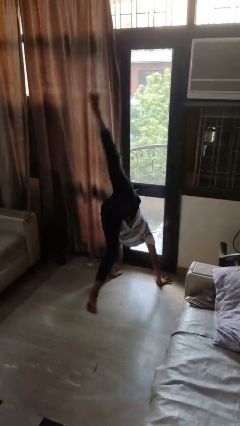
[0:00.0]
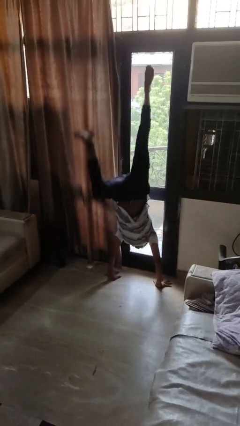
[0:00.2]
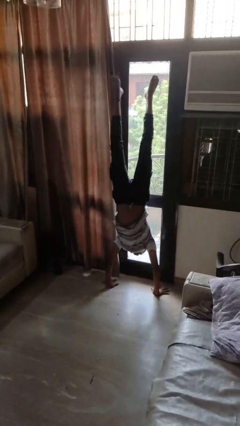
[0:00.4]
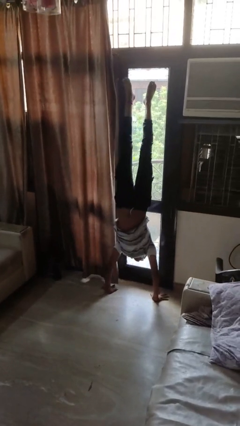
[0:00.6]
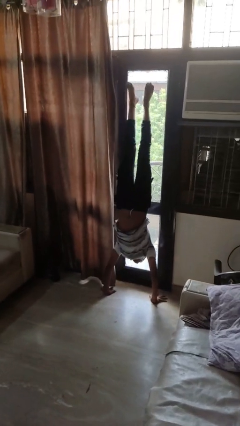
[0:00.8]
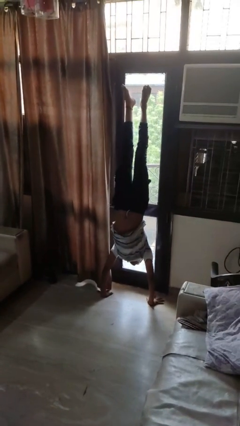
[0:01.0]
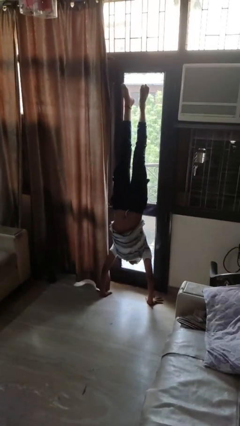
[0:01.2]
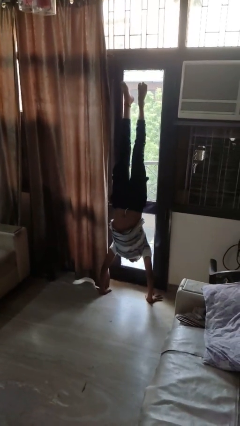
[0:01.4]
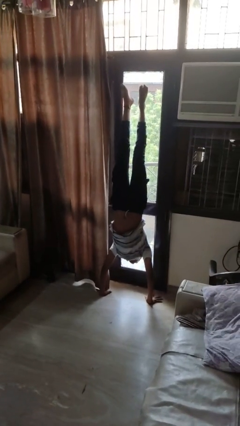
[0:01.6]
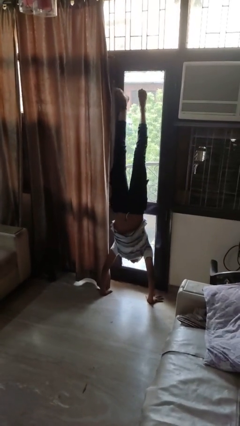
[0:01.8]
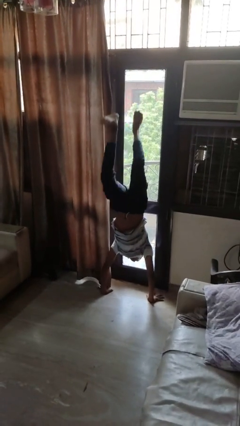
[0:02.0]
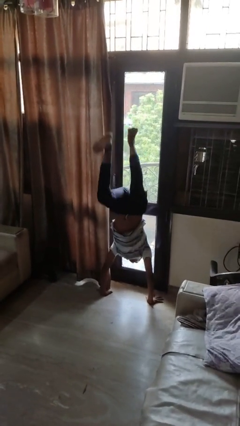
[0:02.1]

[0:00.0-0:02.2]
person handstand

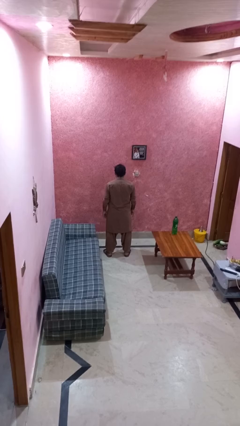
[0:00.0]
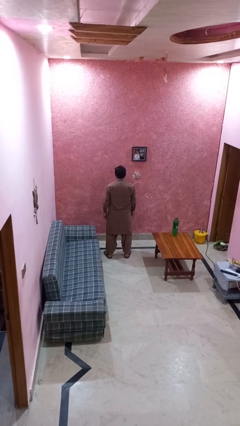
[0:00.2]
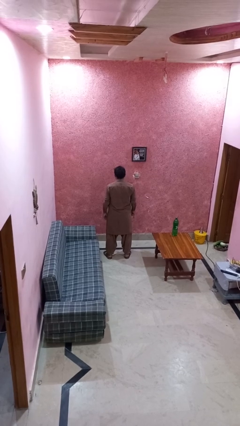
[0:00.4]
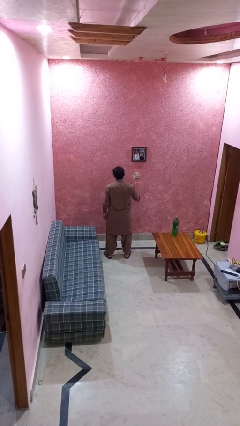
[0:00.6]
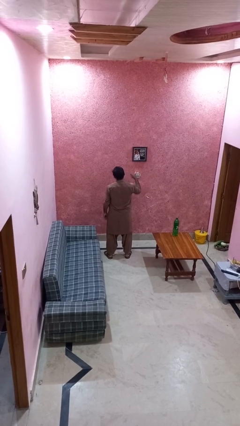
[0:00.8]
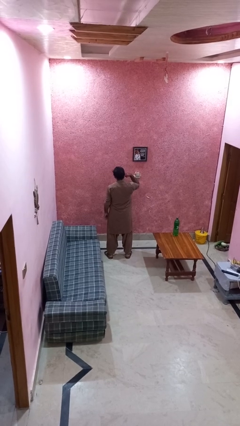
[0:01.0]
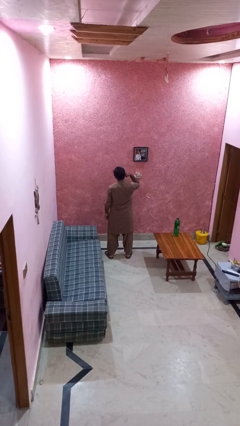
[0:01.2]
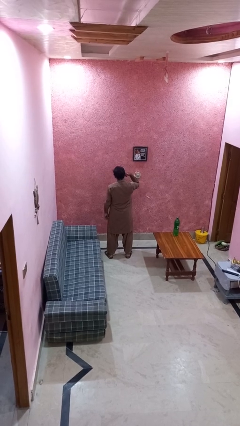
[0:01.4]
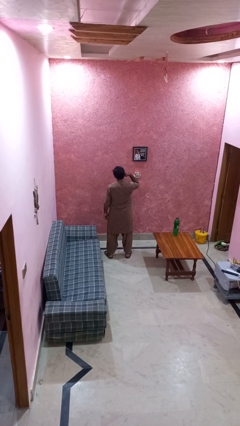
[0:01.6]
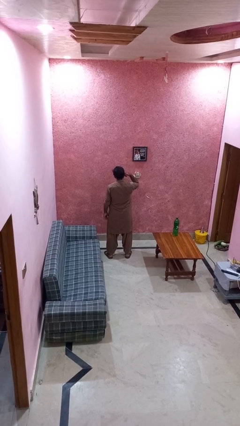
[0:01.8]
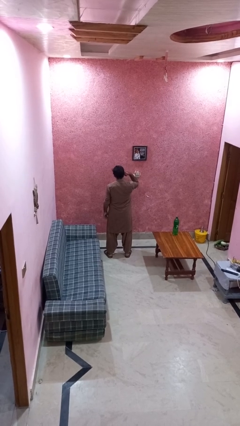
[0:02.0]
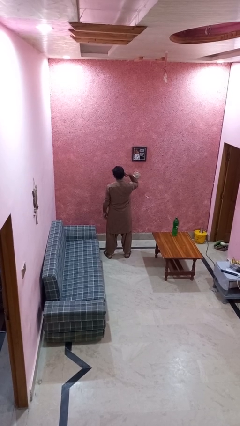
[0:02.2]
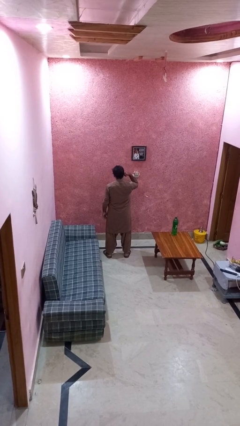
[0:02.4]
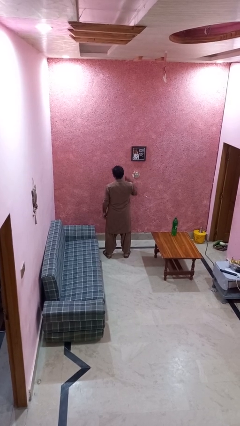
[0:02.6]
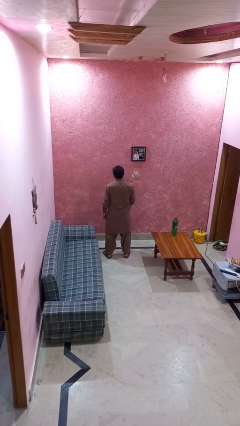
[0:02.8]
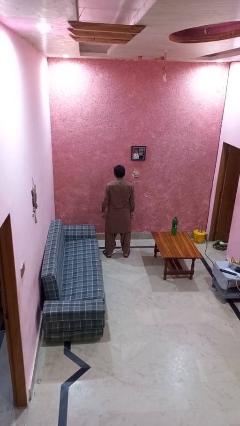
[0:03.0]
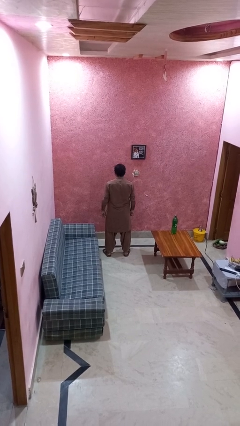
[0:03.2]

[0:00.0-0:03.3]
person gestures call me

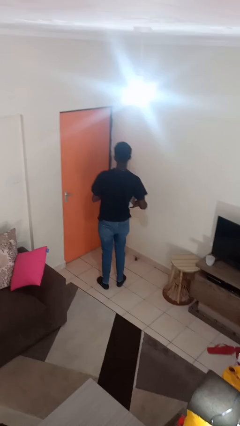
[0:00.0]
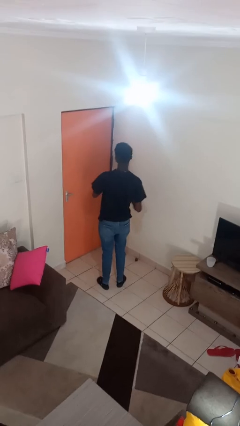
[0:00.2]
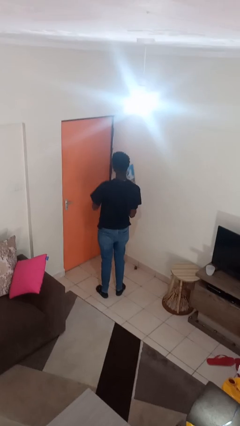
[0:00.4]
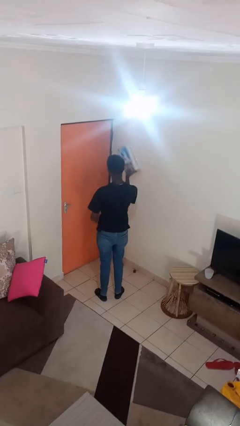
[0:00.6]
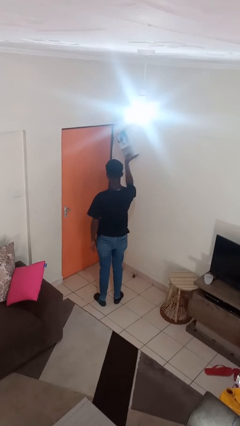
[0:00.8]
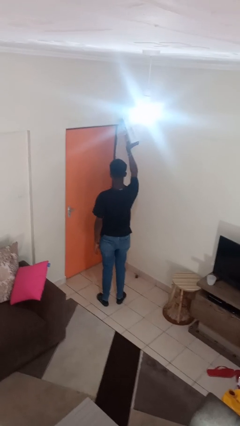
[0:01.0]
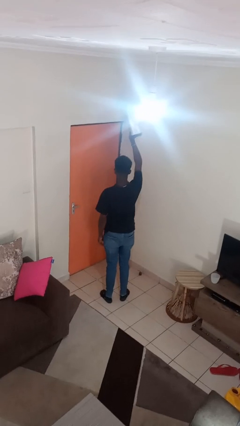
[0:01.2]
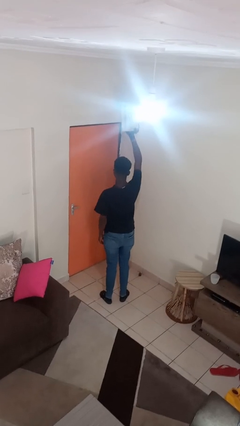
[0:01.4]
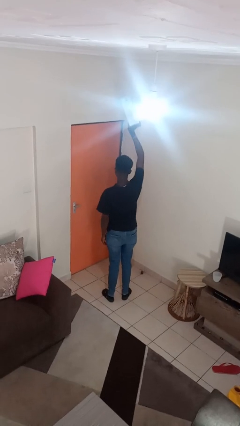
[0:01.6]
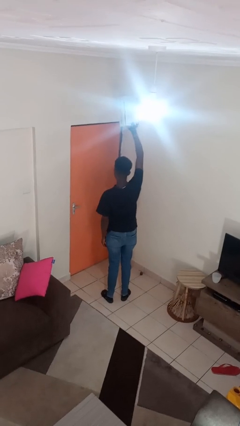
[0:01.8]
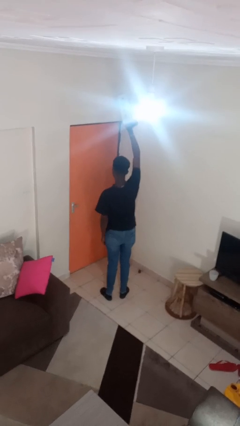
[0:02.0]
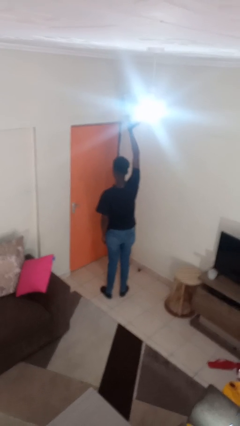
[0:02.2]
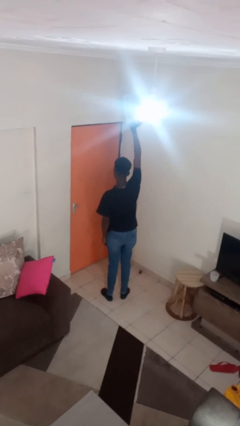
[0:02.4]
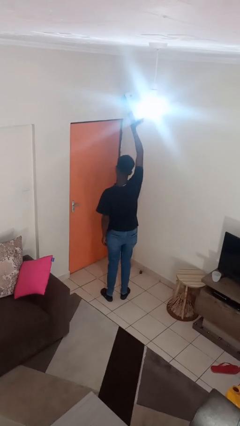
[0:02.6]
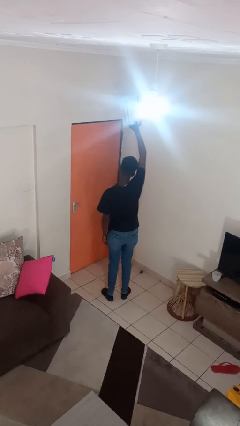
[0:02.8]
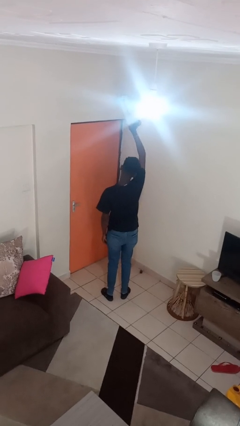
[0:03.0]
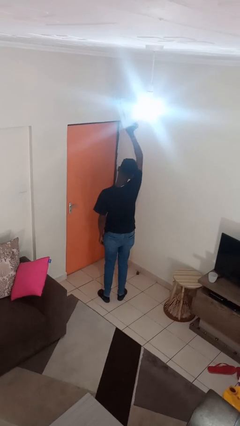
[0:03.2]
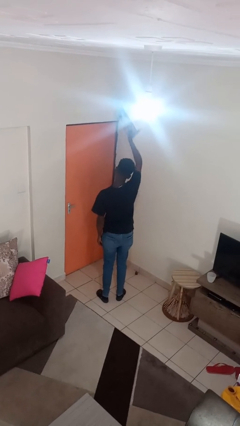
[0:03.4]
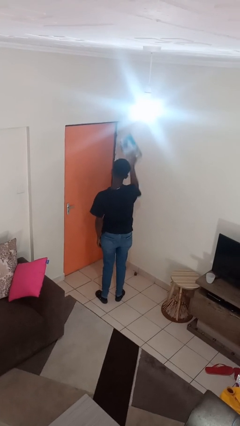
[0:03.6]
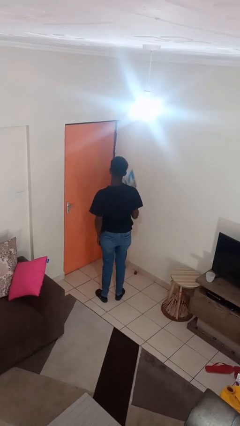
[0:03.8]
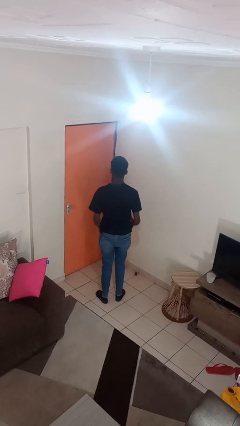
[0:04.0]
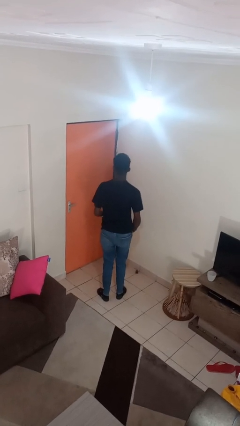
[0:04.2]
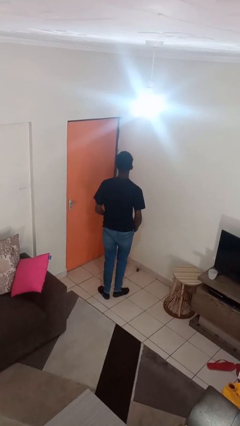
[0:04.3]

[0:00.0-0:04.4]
person holds object above head

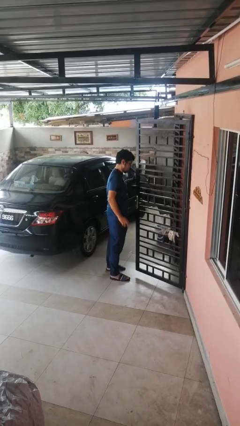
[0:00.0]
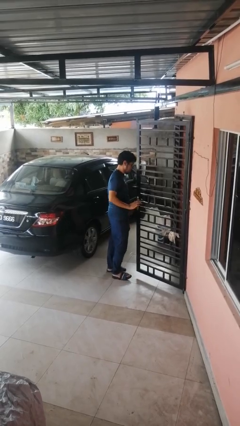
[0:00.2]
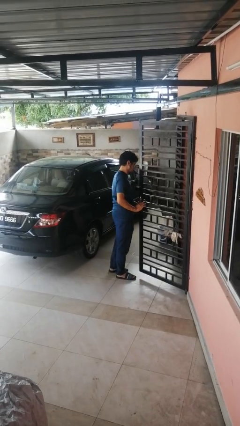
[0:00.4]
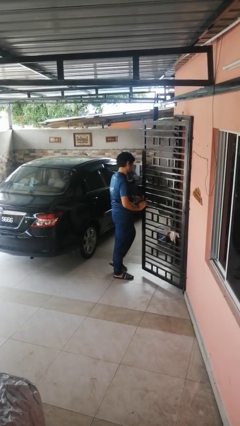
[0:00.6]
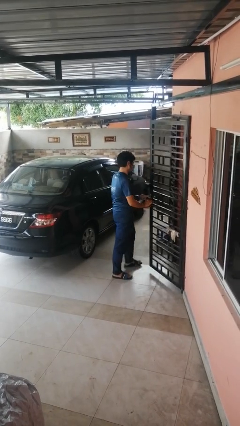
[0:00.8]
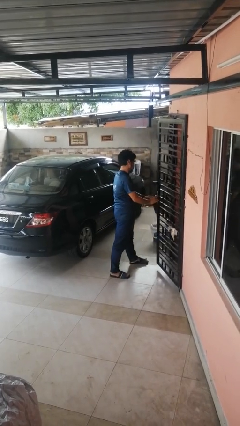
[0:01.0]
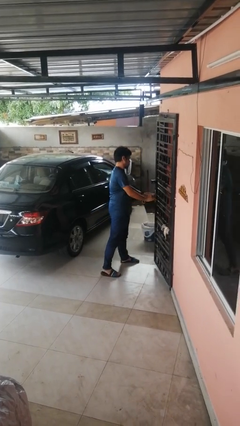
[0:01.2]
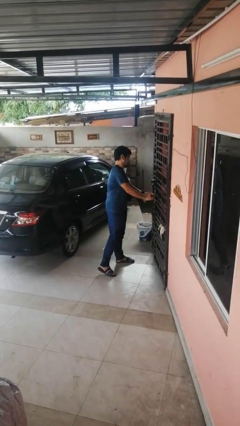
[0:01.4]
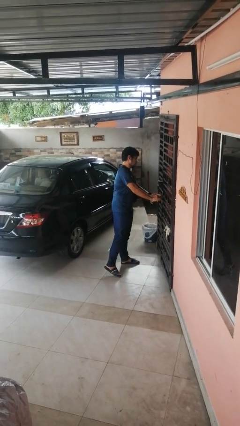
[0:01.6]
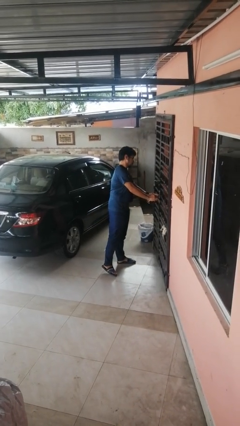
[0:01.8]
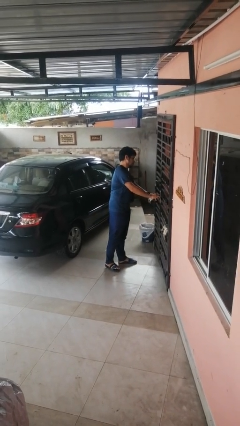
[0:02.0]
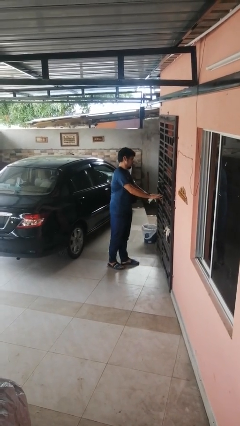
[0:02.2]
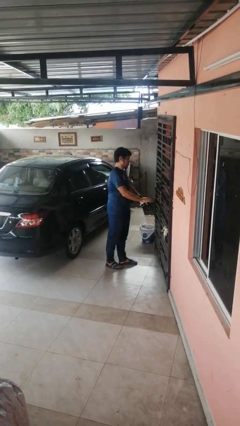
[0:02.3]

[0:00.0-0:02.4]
person closes gate

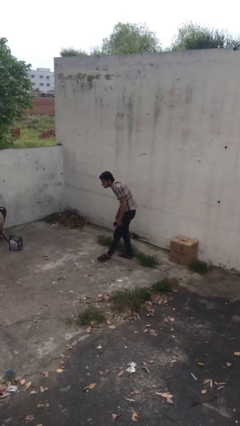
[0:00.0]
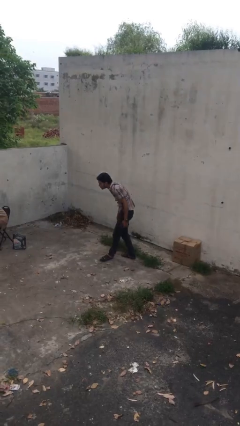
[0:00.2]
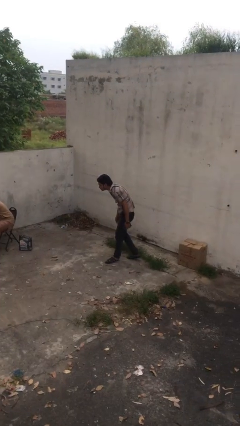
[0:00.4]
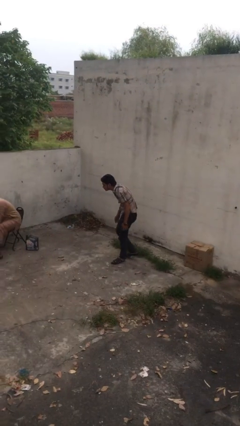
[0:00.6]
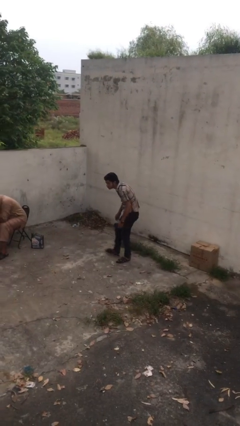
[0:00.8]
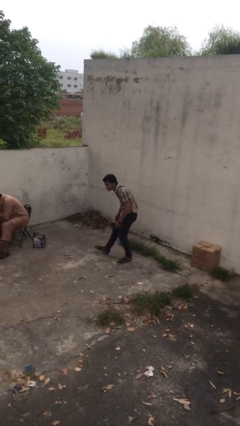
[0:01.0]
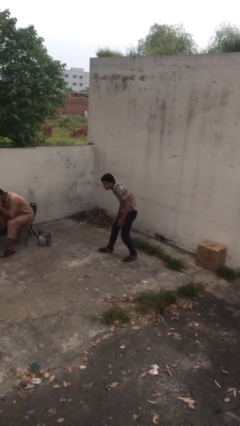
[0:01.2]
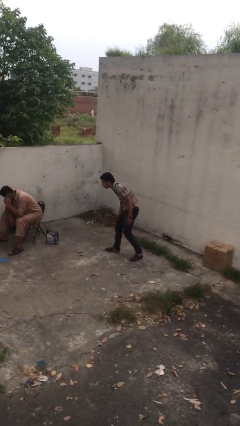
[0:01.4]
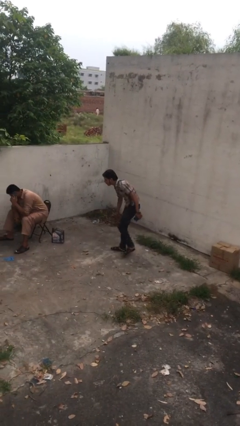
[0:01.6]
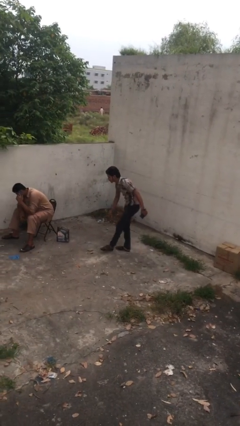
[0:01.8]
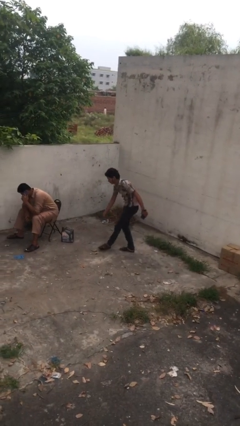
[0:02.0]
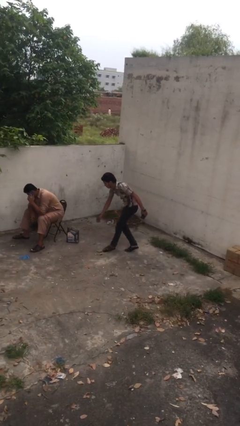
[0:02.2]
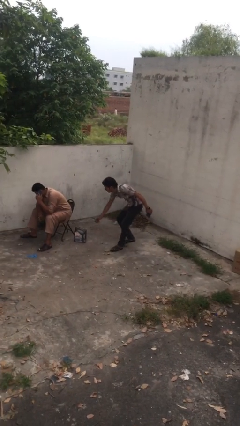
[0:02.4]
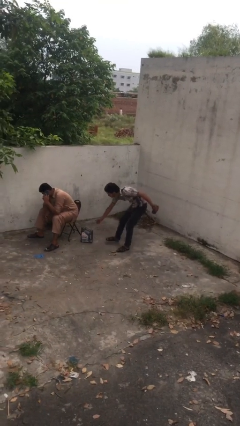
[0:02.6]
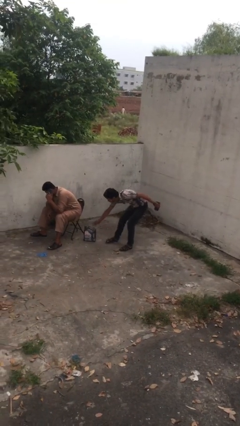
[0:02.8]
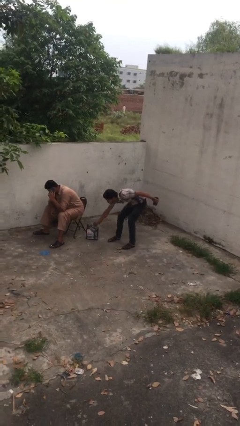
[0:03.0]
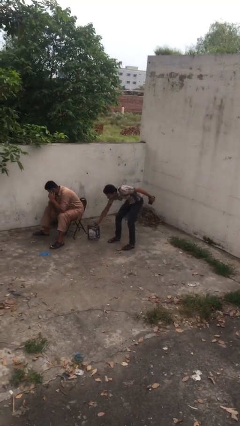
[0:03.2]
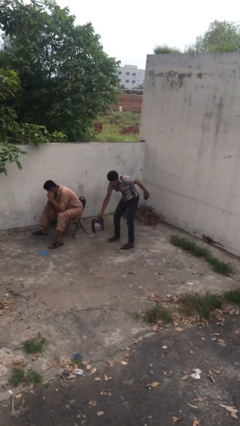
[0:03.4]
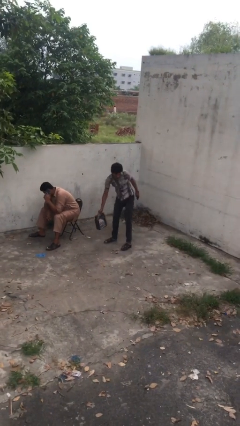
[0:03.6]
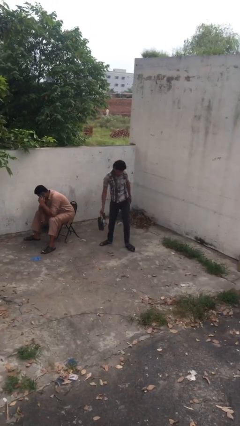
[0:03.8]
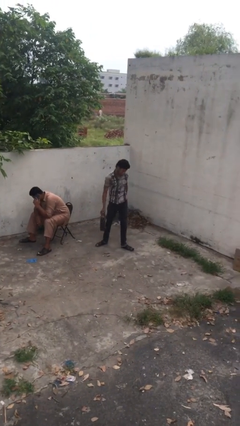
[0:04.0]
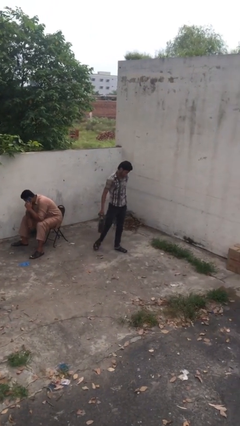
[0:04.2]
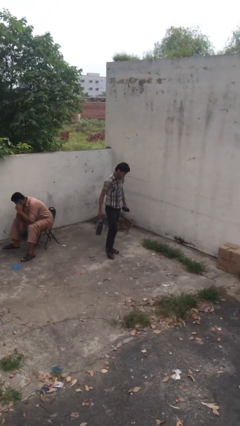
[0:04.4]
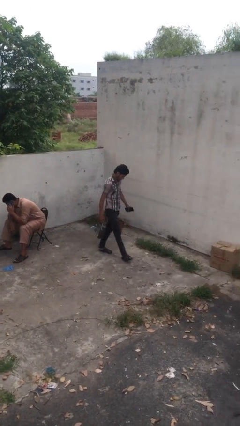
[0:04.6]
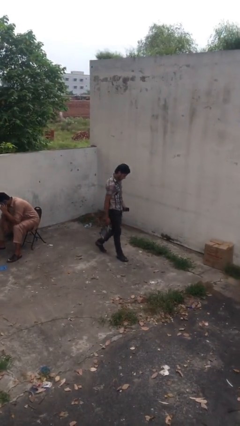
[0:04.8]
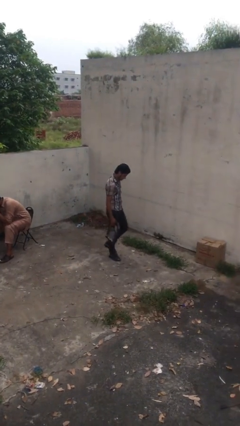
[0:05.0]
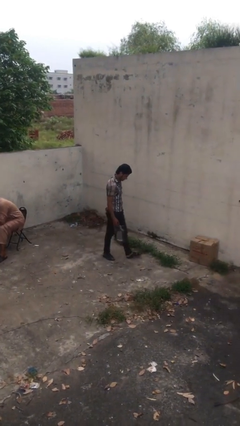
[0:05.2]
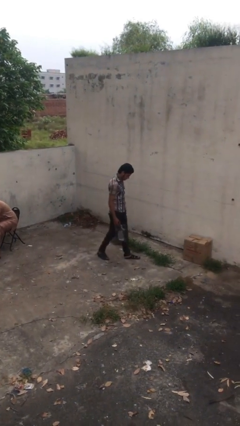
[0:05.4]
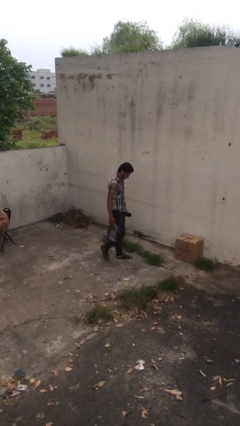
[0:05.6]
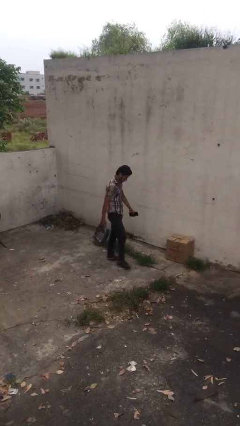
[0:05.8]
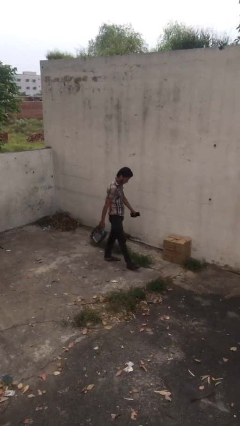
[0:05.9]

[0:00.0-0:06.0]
person steals object from person
